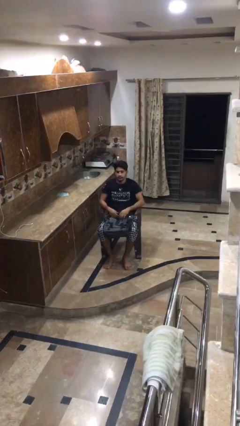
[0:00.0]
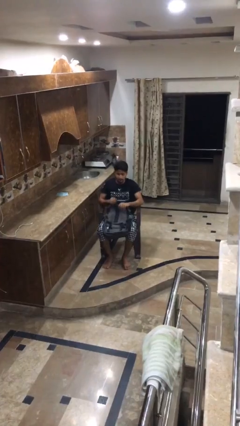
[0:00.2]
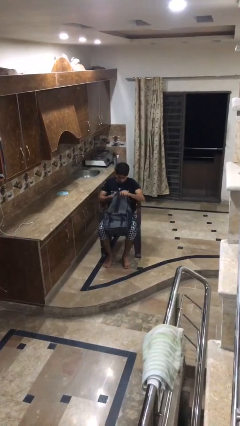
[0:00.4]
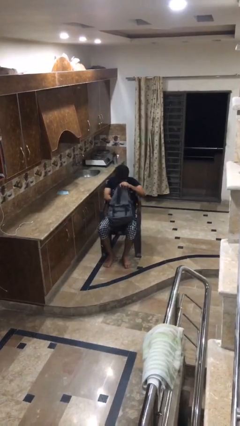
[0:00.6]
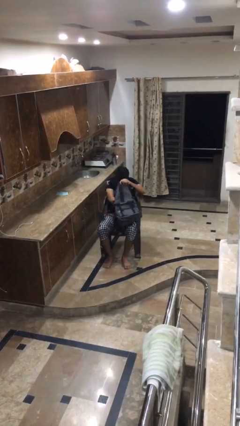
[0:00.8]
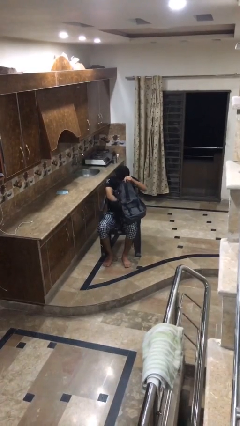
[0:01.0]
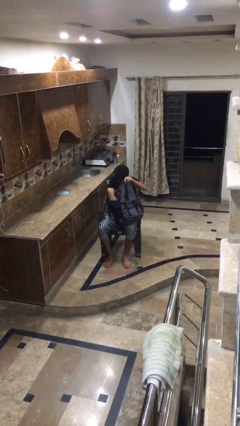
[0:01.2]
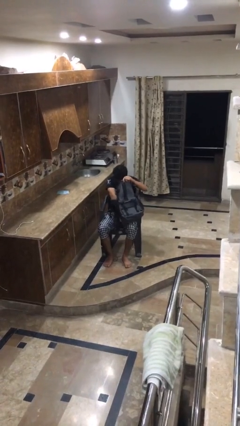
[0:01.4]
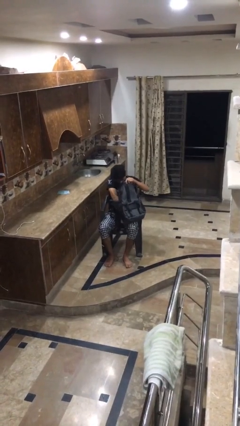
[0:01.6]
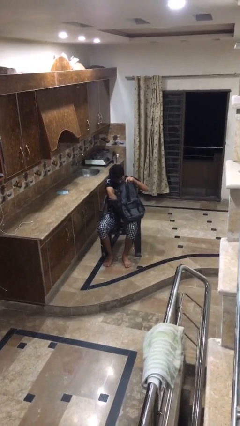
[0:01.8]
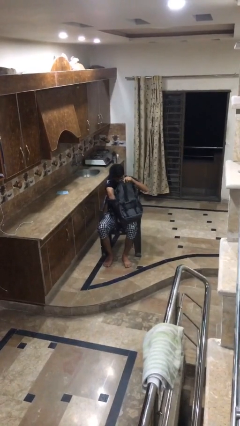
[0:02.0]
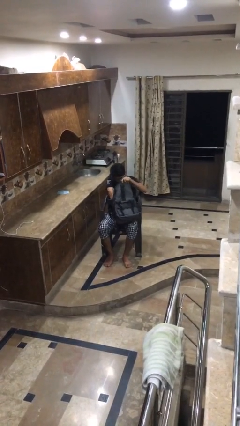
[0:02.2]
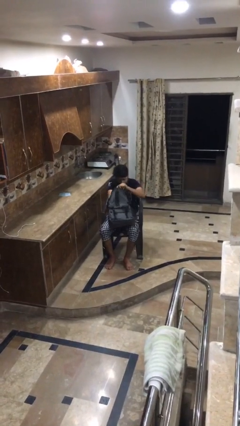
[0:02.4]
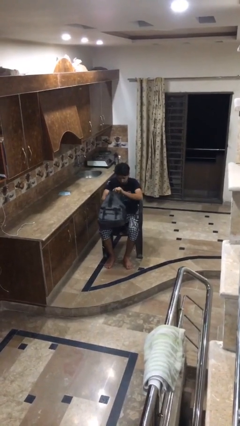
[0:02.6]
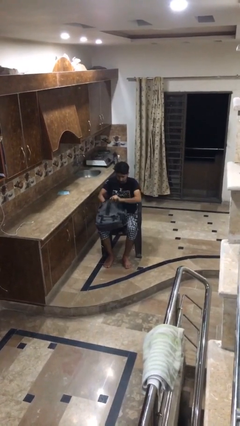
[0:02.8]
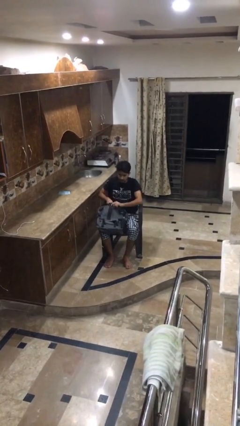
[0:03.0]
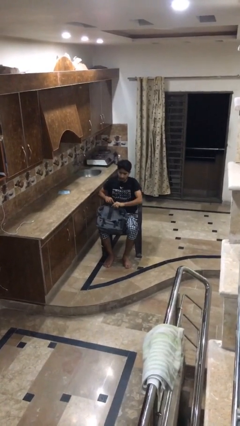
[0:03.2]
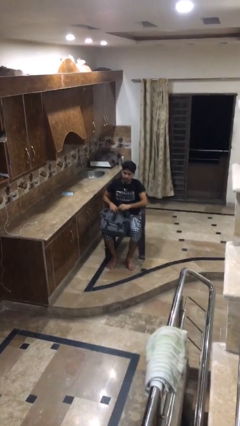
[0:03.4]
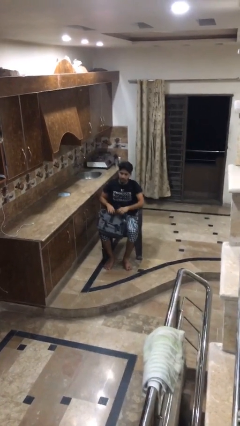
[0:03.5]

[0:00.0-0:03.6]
person searches in bag

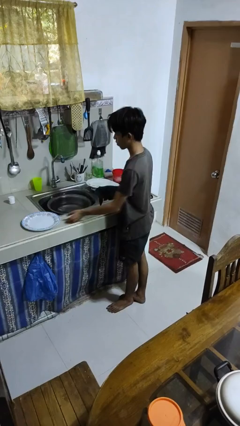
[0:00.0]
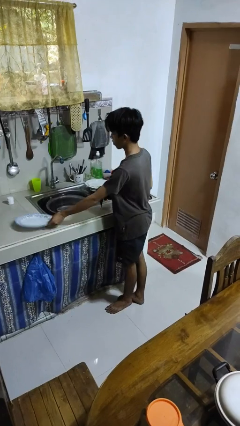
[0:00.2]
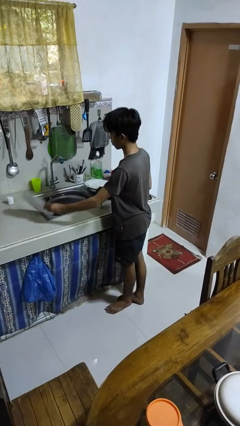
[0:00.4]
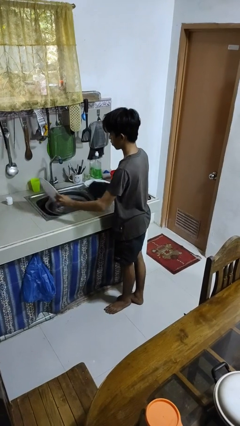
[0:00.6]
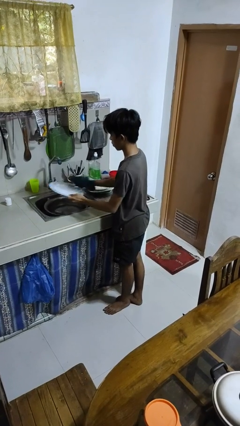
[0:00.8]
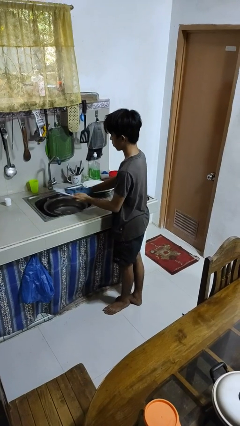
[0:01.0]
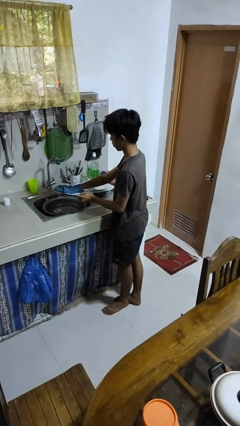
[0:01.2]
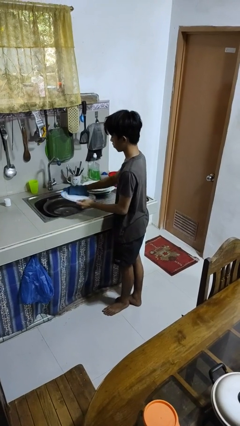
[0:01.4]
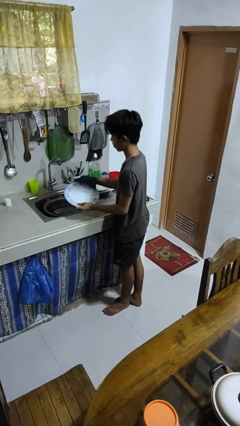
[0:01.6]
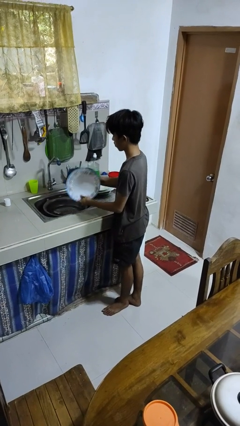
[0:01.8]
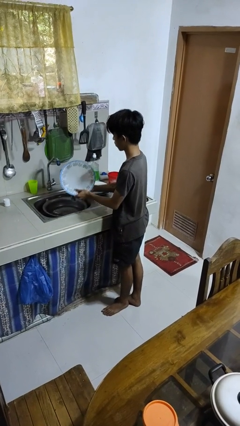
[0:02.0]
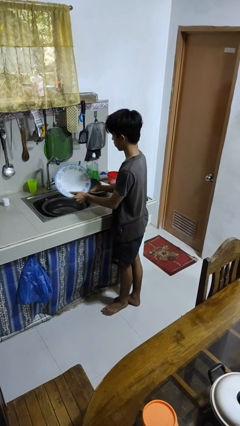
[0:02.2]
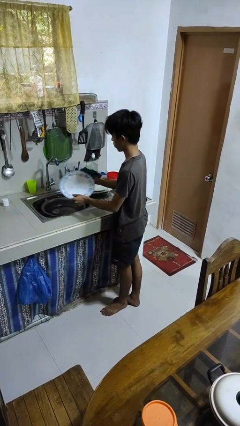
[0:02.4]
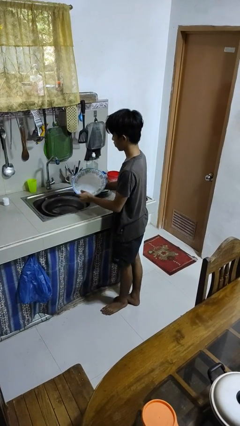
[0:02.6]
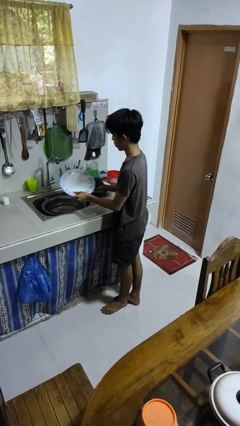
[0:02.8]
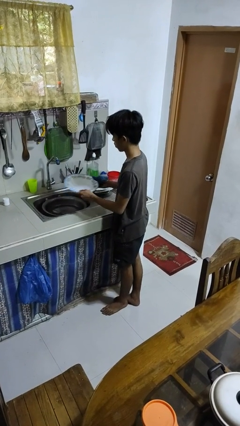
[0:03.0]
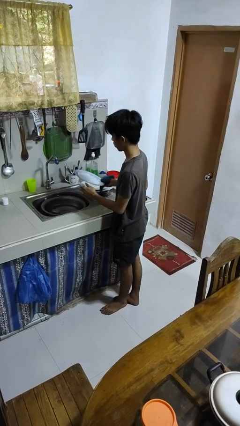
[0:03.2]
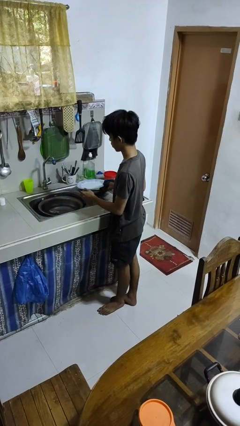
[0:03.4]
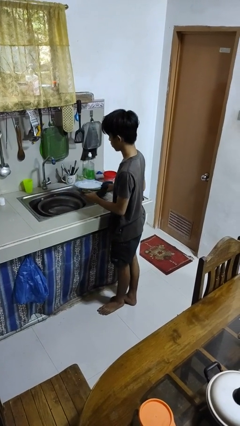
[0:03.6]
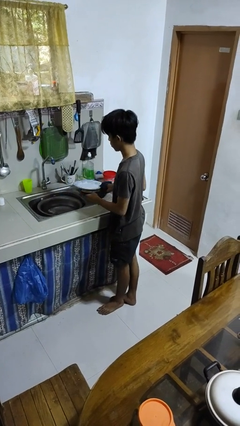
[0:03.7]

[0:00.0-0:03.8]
person dries dish

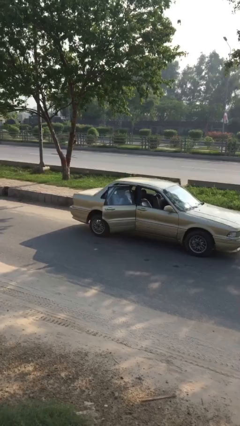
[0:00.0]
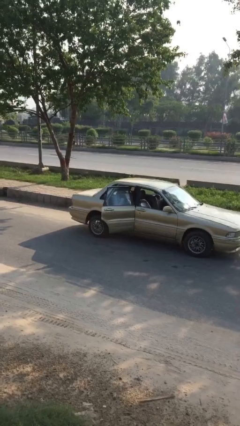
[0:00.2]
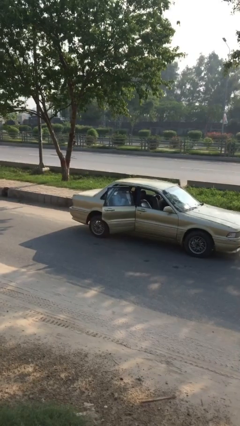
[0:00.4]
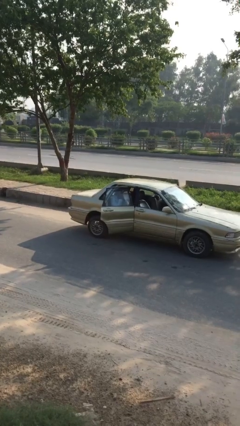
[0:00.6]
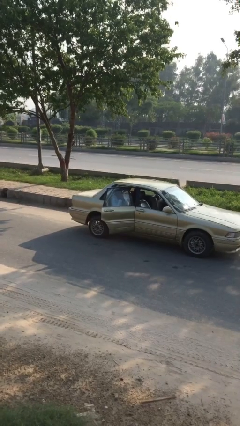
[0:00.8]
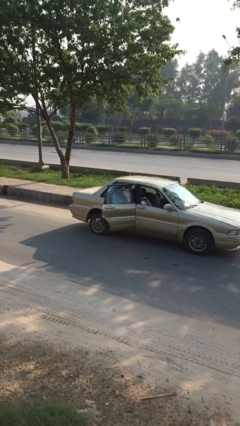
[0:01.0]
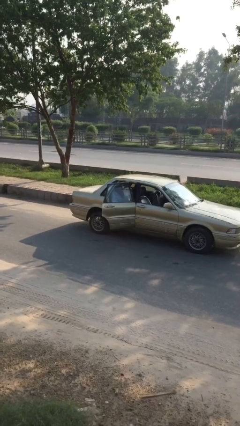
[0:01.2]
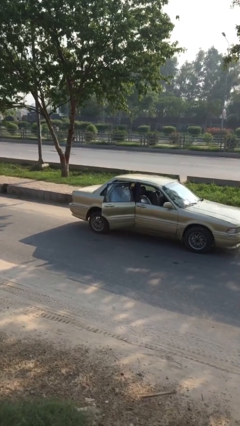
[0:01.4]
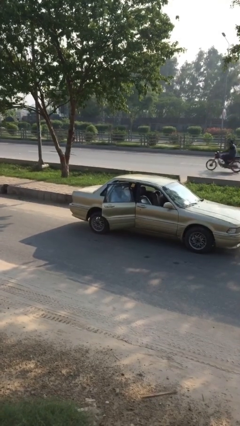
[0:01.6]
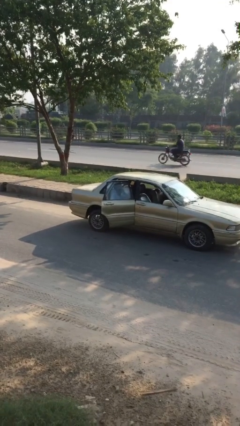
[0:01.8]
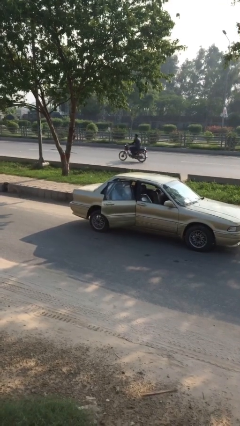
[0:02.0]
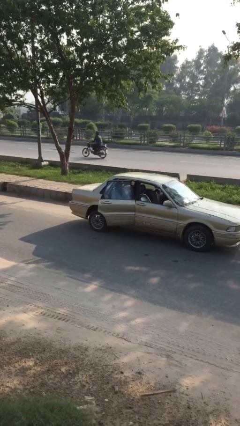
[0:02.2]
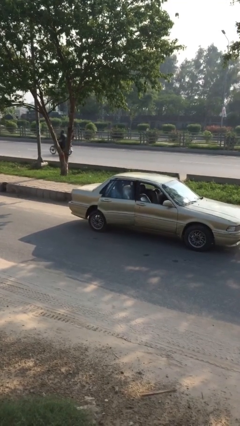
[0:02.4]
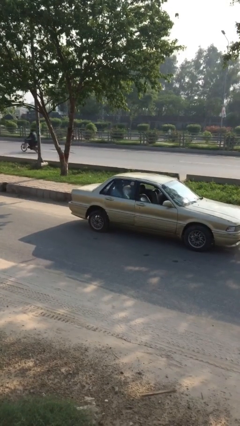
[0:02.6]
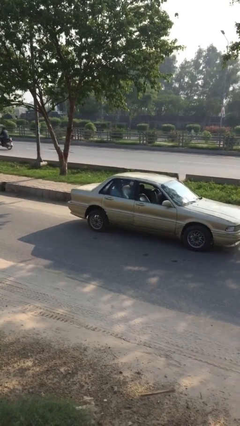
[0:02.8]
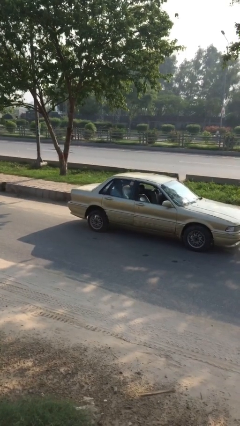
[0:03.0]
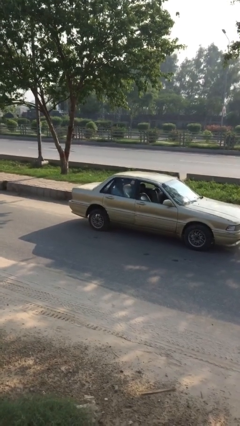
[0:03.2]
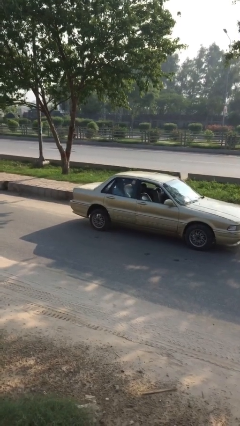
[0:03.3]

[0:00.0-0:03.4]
person closes car door

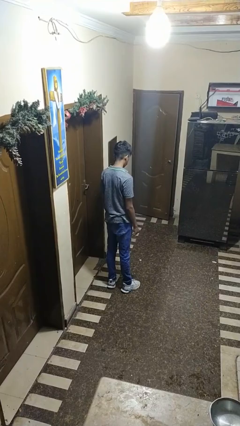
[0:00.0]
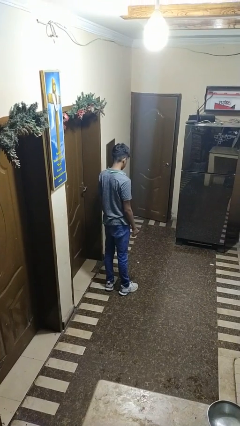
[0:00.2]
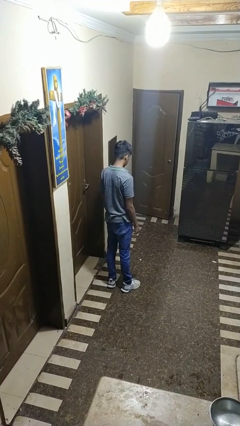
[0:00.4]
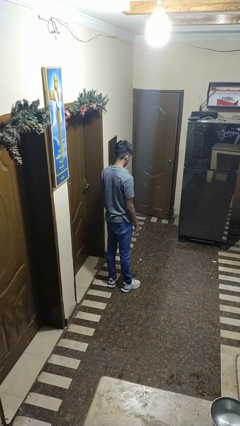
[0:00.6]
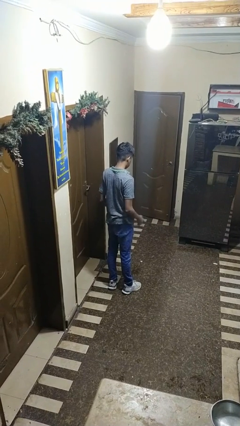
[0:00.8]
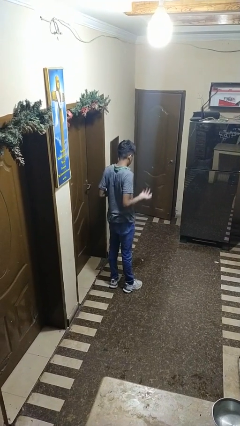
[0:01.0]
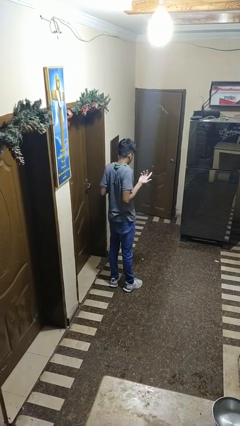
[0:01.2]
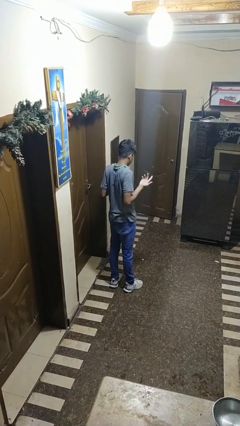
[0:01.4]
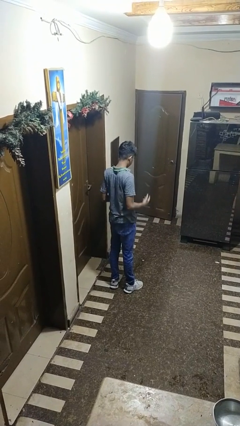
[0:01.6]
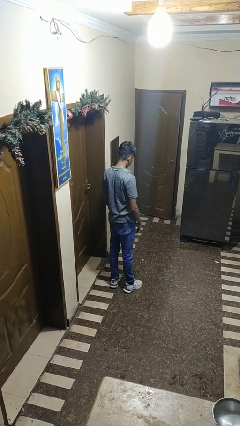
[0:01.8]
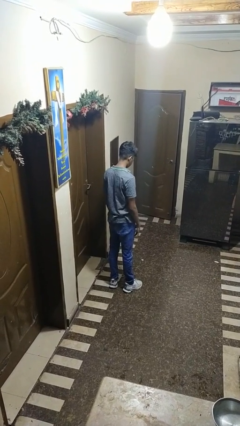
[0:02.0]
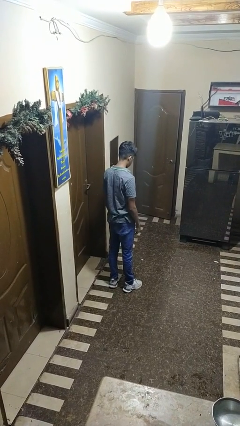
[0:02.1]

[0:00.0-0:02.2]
person shrugs

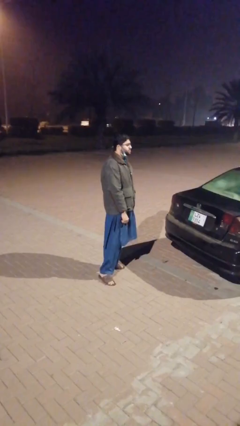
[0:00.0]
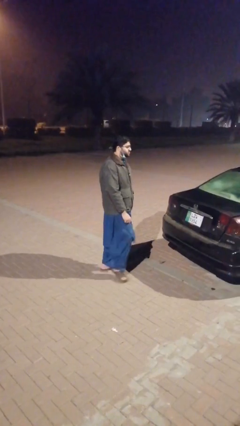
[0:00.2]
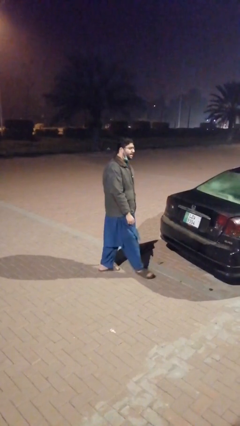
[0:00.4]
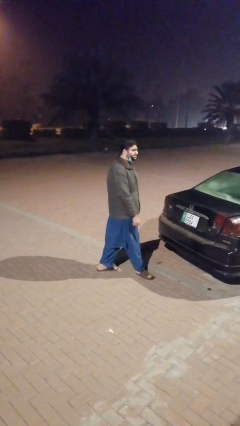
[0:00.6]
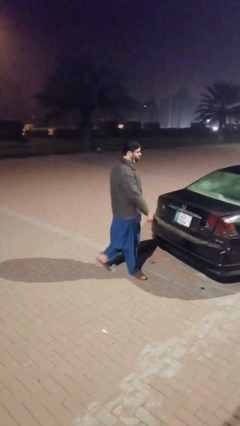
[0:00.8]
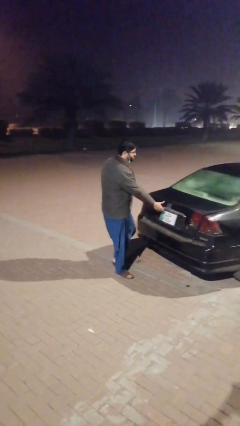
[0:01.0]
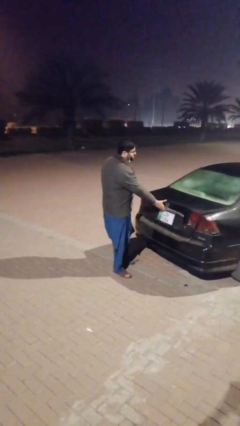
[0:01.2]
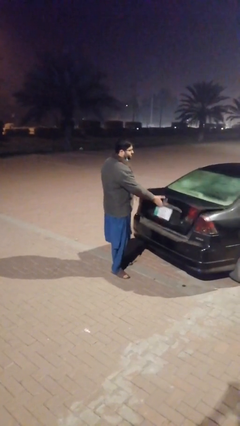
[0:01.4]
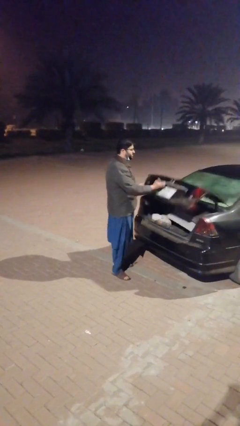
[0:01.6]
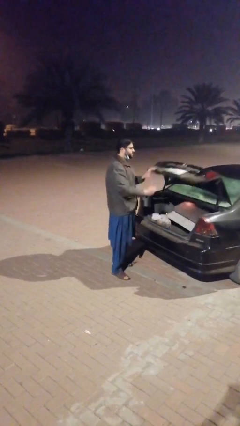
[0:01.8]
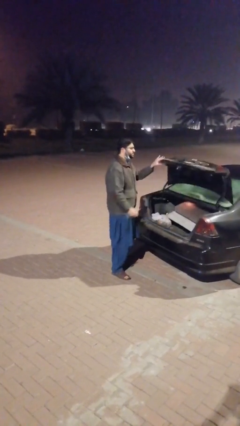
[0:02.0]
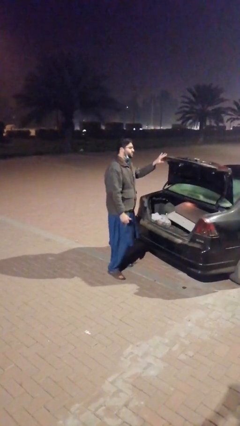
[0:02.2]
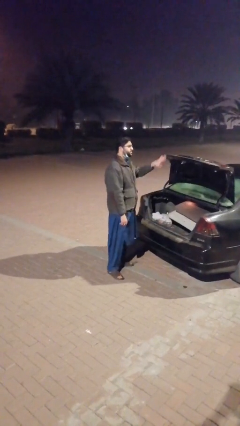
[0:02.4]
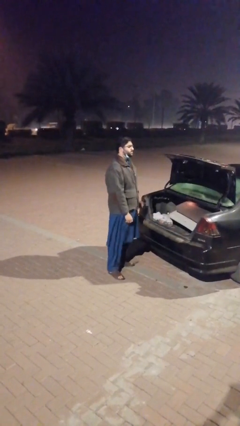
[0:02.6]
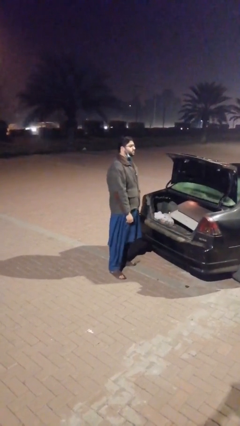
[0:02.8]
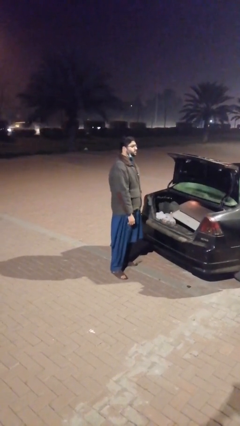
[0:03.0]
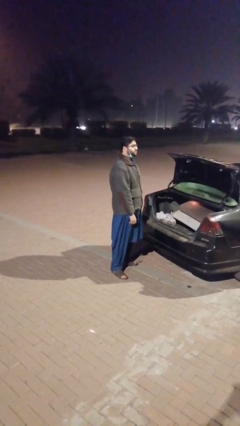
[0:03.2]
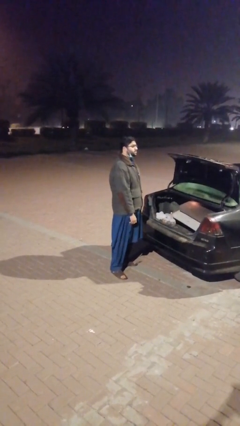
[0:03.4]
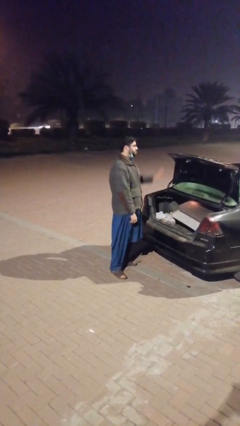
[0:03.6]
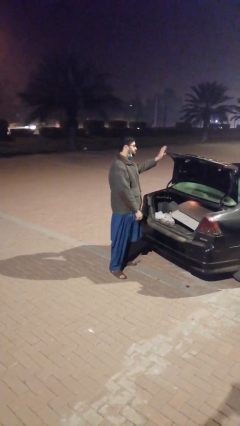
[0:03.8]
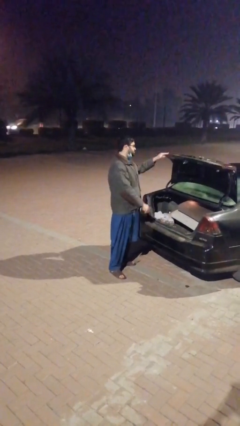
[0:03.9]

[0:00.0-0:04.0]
person opens car trunk

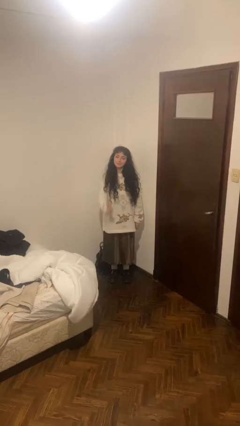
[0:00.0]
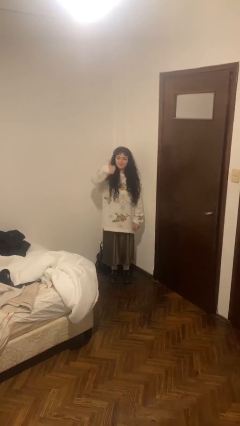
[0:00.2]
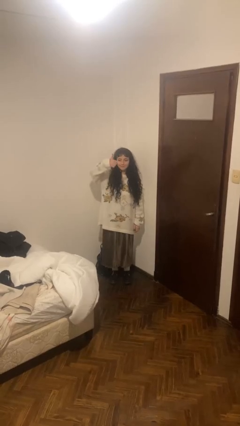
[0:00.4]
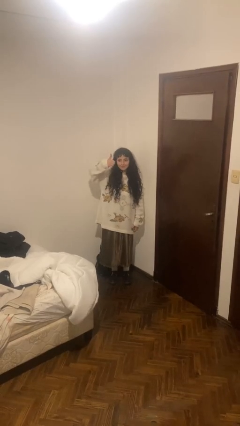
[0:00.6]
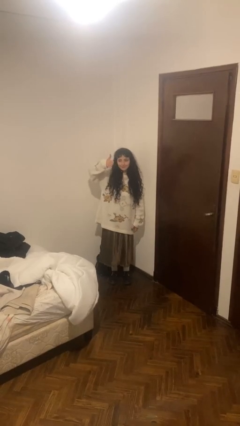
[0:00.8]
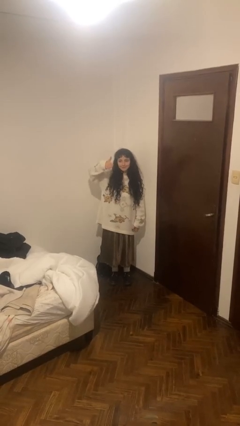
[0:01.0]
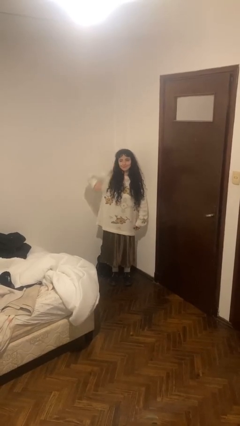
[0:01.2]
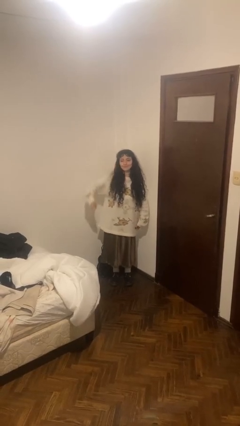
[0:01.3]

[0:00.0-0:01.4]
person gestures thumbs up
